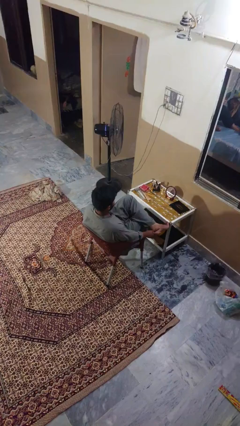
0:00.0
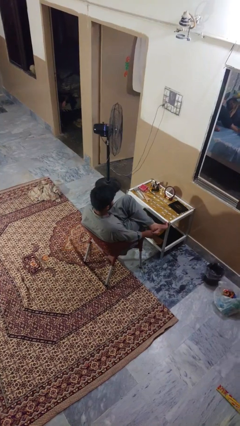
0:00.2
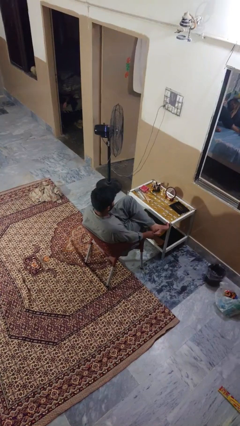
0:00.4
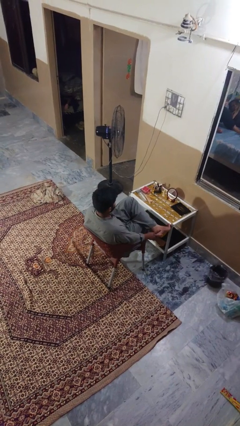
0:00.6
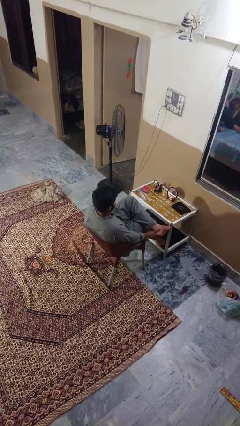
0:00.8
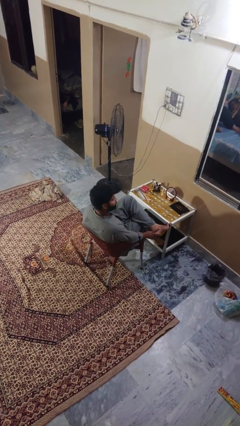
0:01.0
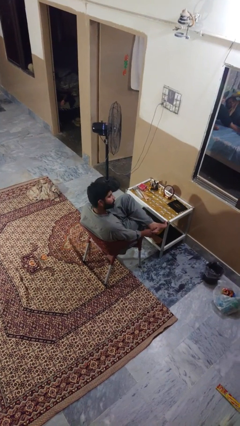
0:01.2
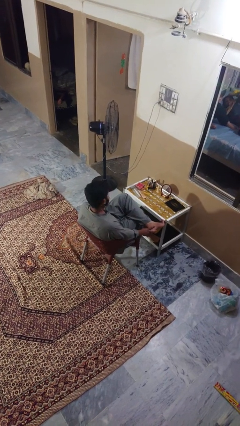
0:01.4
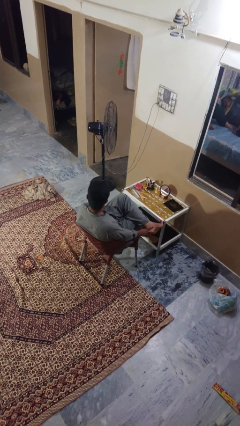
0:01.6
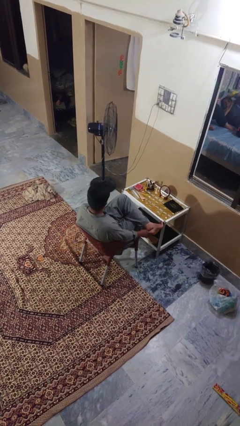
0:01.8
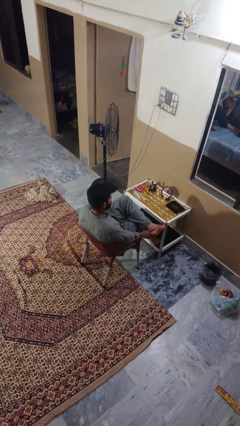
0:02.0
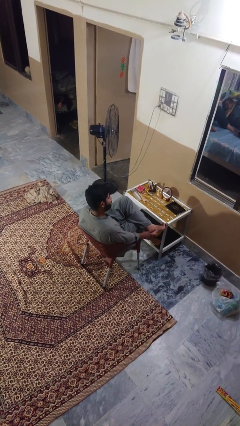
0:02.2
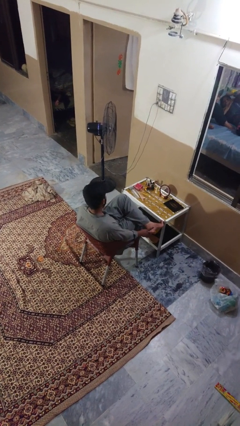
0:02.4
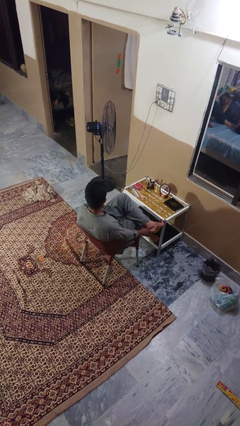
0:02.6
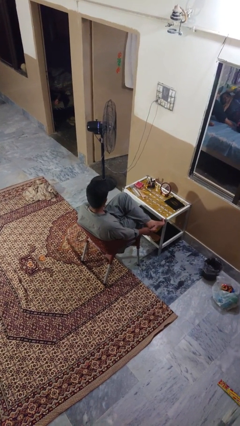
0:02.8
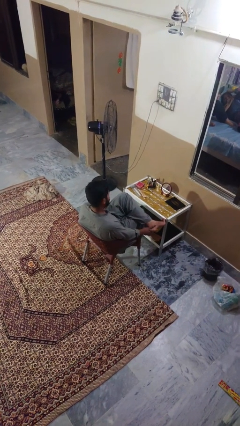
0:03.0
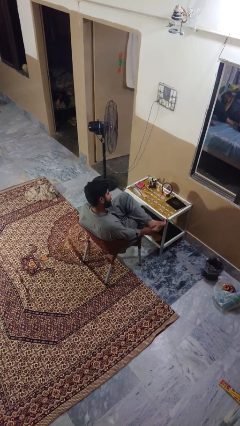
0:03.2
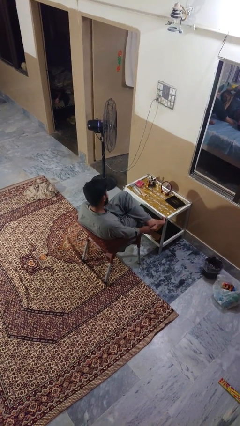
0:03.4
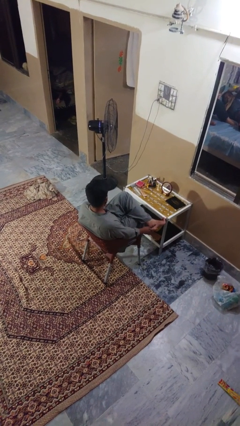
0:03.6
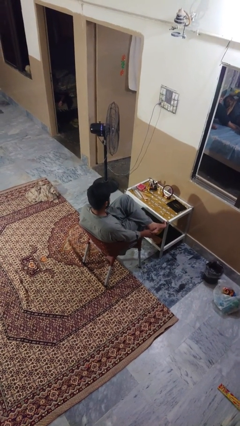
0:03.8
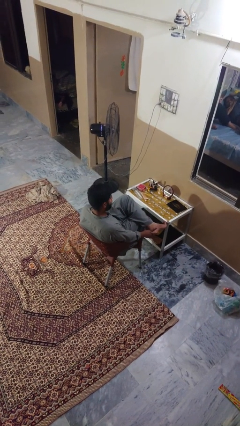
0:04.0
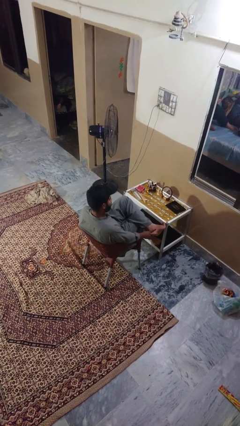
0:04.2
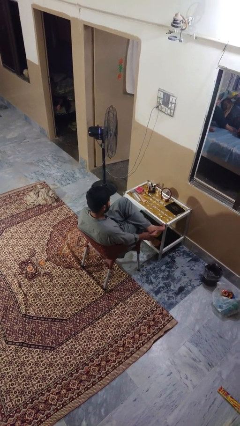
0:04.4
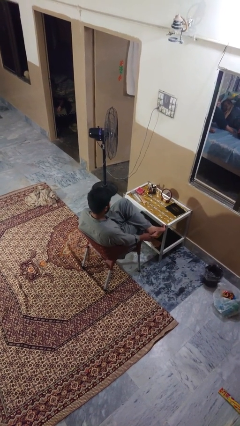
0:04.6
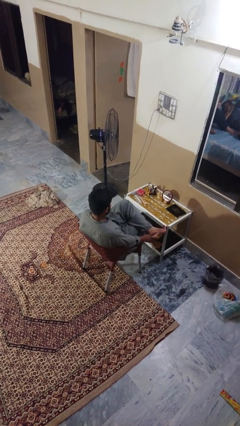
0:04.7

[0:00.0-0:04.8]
person shakes head

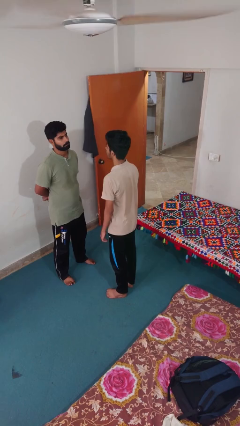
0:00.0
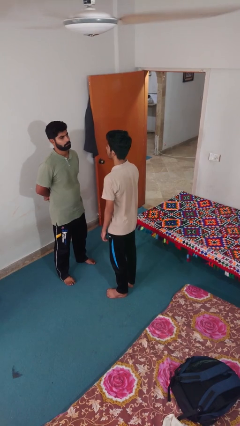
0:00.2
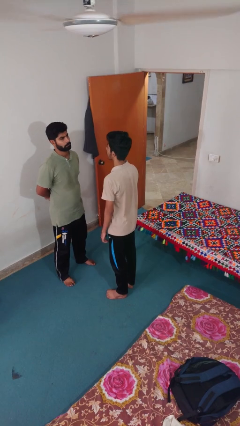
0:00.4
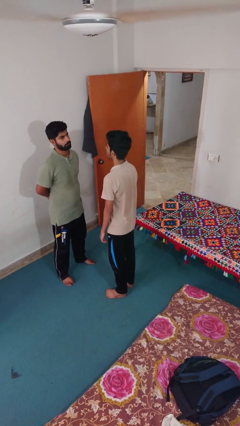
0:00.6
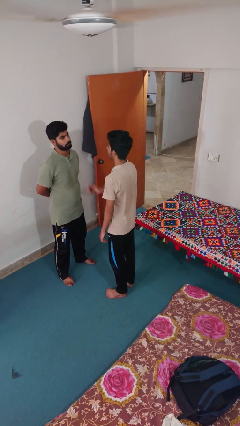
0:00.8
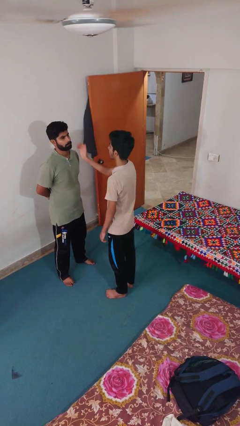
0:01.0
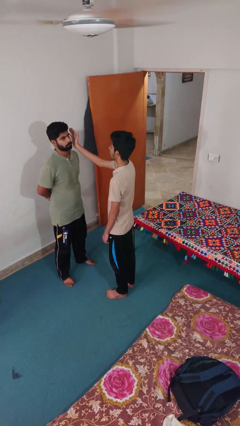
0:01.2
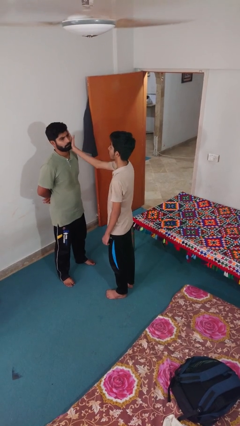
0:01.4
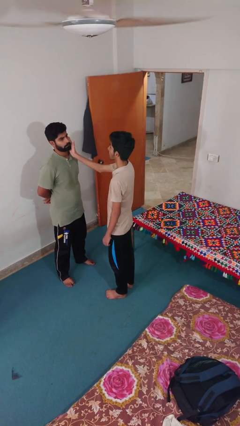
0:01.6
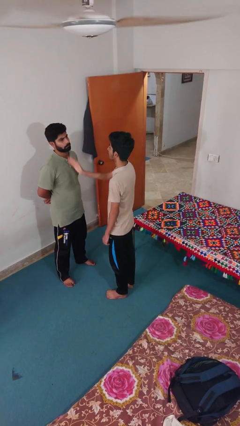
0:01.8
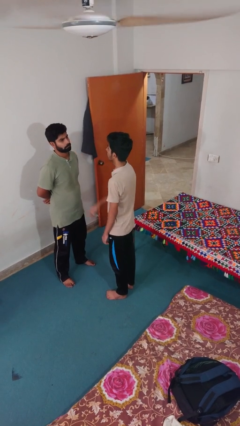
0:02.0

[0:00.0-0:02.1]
person touches face of person

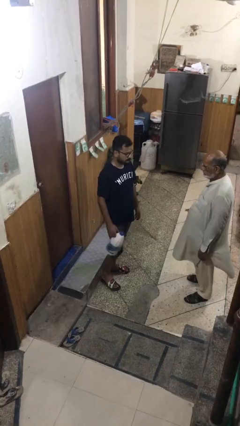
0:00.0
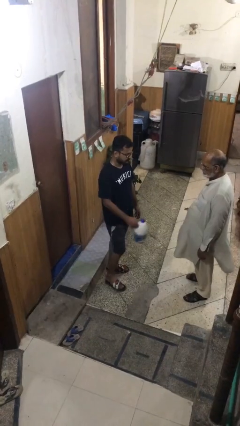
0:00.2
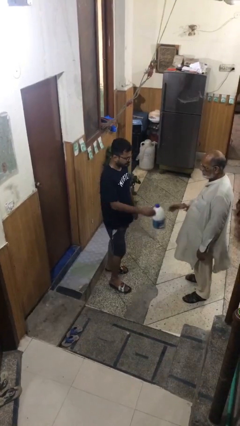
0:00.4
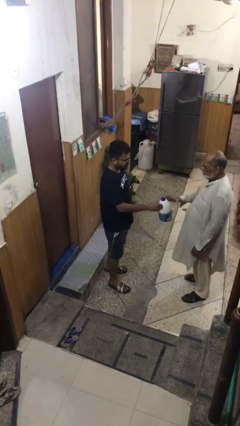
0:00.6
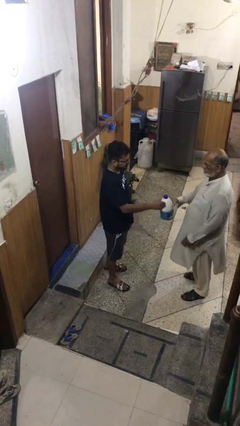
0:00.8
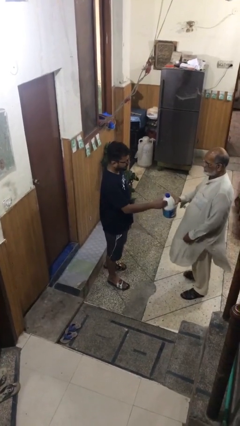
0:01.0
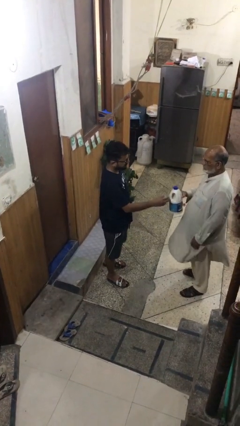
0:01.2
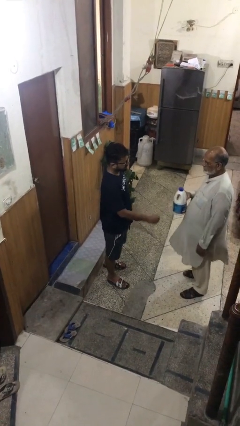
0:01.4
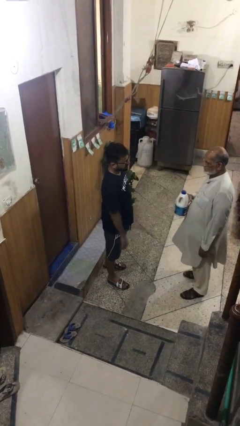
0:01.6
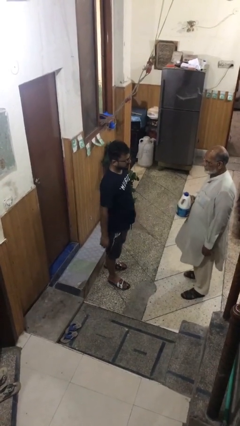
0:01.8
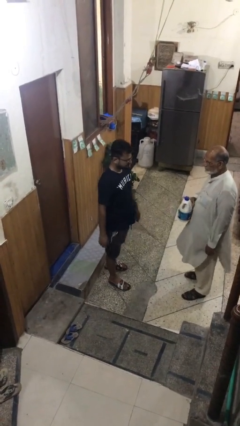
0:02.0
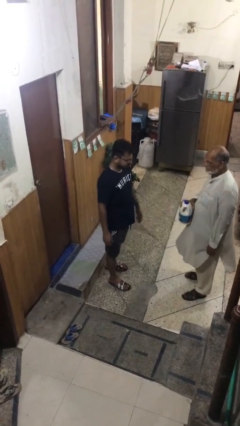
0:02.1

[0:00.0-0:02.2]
person transfers object to person

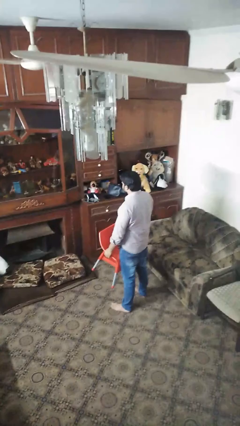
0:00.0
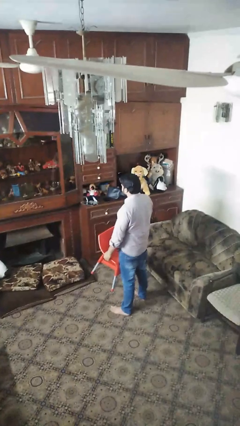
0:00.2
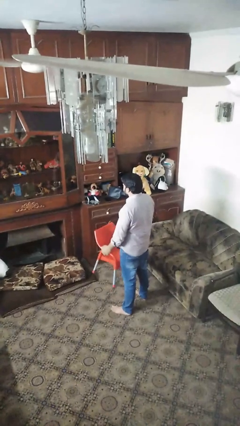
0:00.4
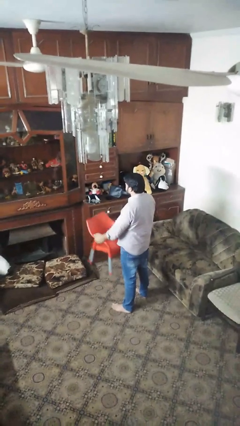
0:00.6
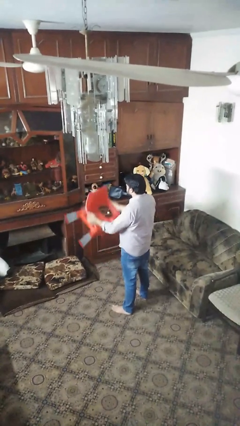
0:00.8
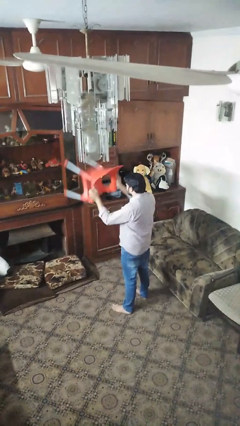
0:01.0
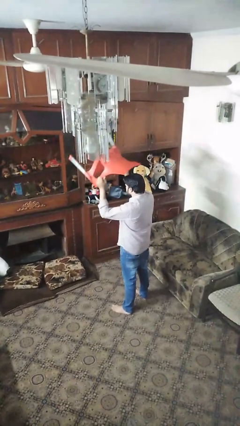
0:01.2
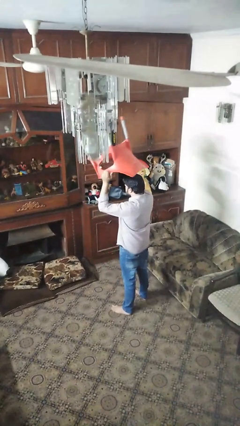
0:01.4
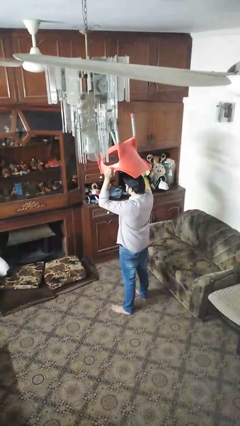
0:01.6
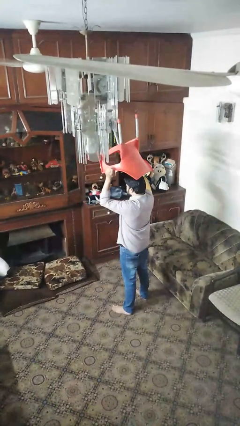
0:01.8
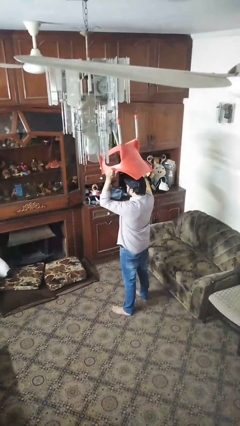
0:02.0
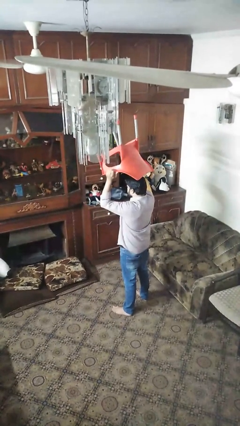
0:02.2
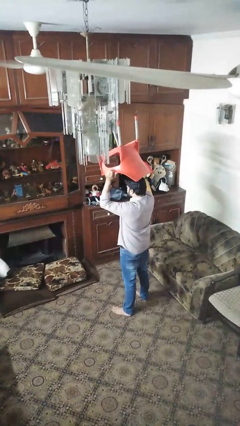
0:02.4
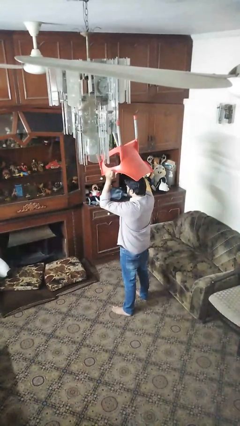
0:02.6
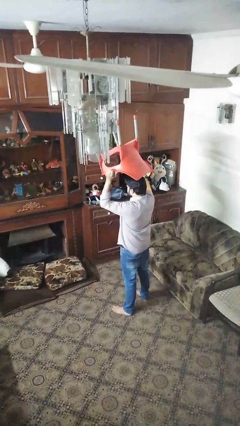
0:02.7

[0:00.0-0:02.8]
person holds object above head

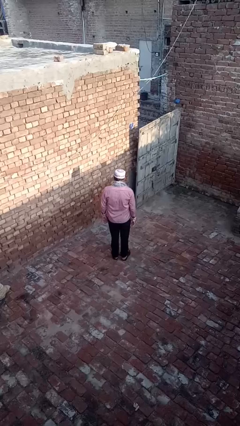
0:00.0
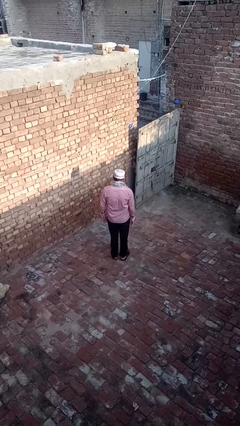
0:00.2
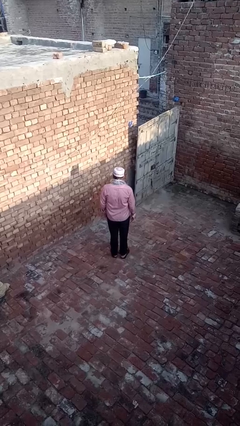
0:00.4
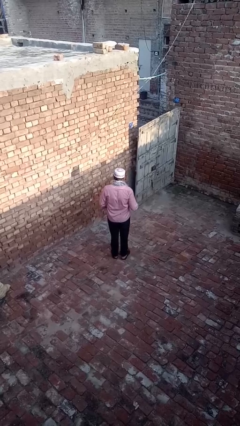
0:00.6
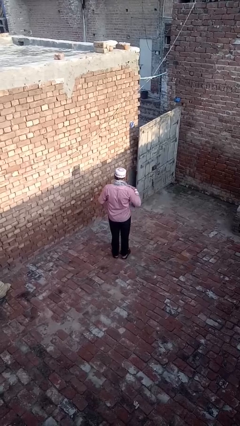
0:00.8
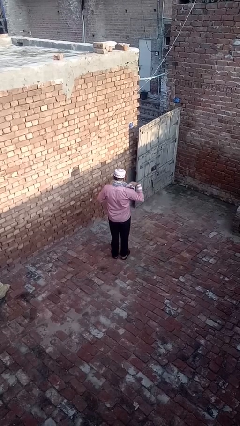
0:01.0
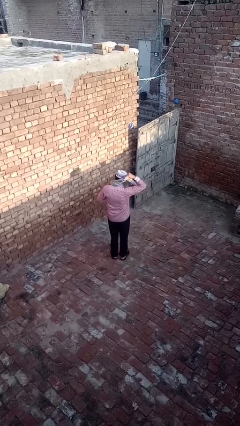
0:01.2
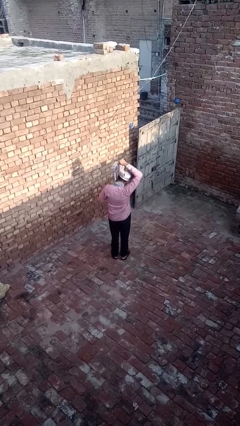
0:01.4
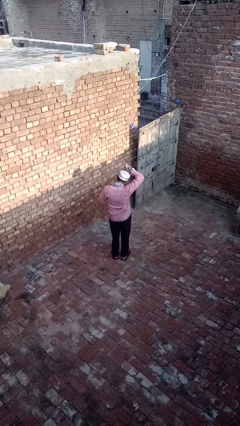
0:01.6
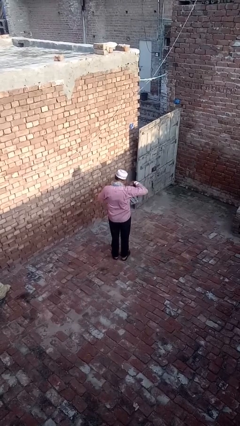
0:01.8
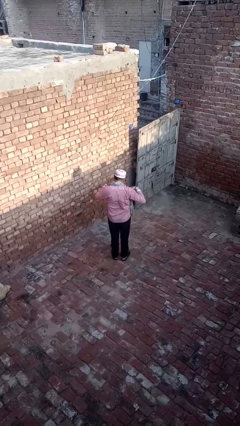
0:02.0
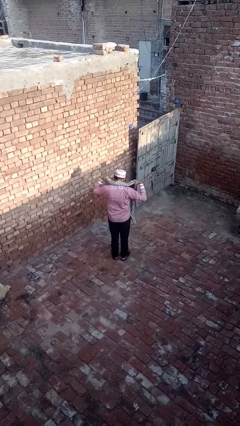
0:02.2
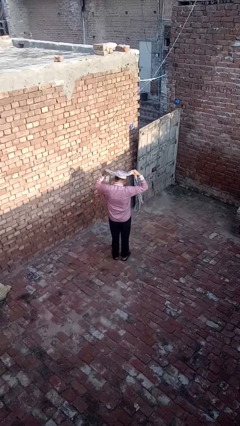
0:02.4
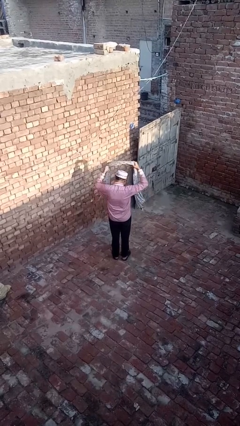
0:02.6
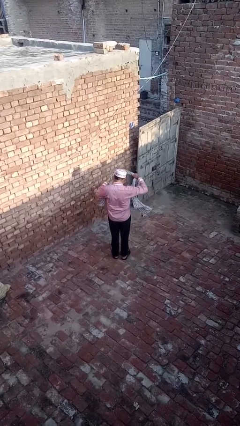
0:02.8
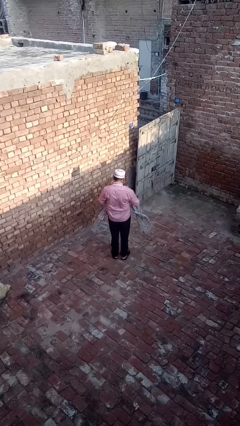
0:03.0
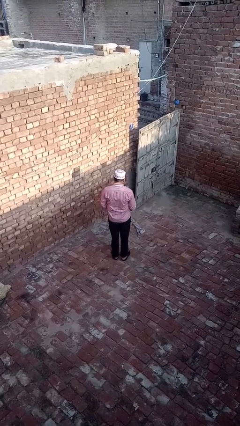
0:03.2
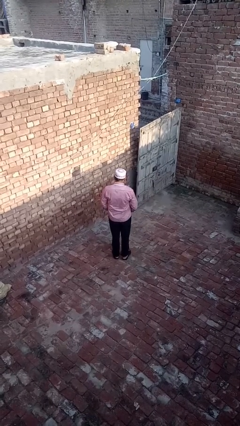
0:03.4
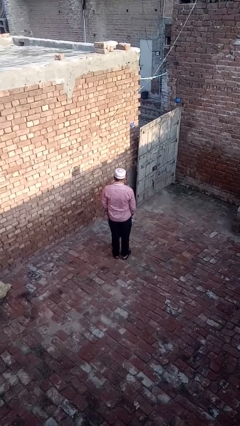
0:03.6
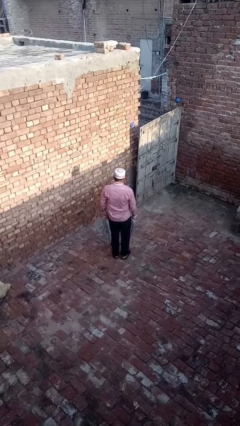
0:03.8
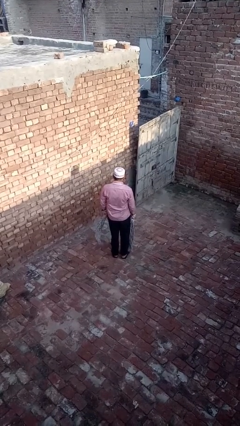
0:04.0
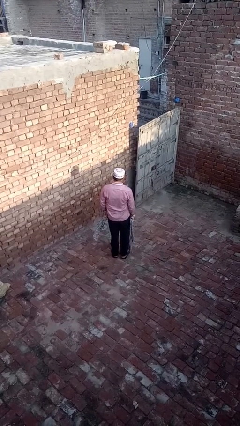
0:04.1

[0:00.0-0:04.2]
person takes off scarf

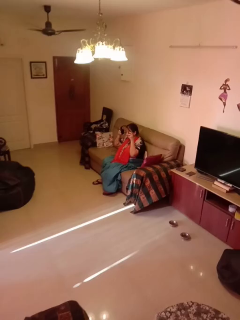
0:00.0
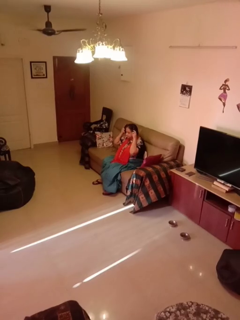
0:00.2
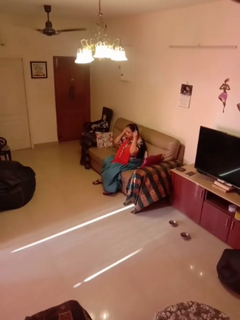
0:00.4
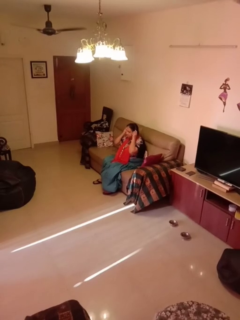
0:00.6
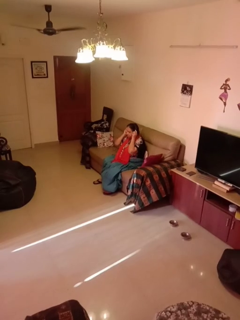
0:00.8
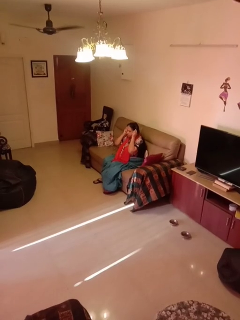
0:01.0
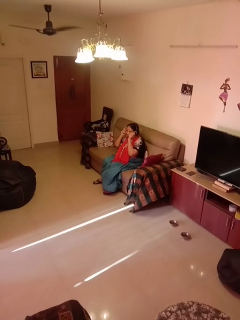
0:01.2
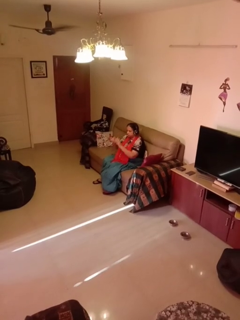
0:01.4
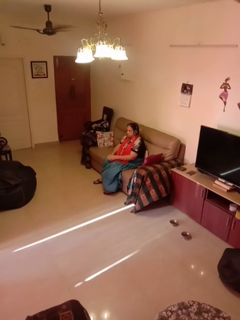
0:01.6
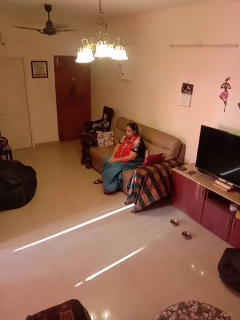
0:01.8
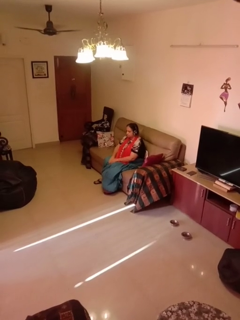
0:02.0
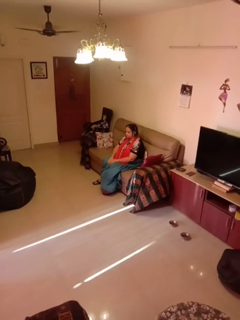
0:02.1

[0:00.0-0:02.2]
person puts on headphones
